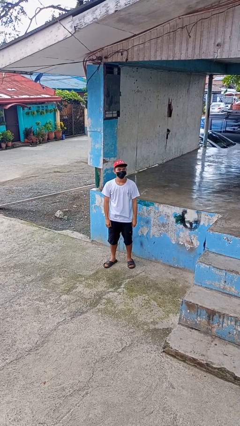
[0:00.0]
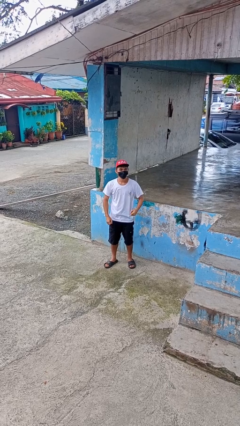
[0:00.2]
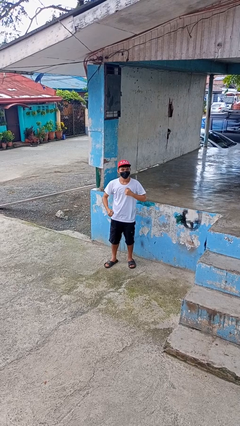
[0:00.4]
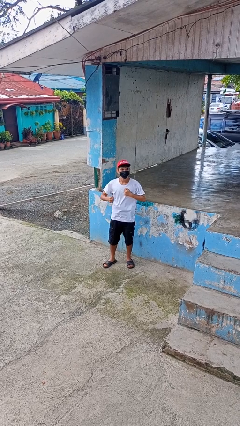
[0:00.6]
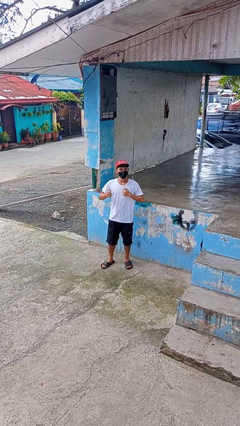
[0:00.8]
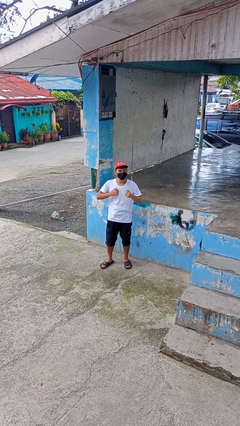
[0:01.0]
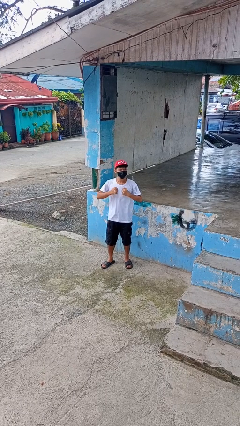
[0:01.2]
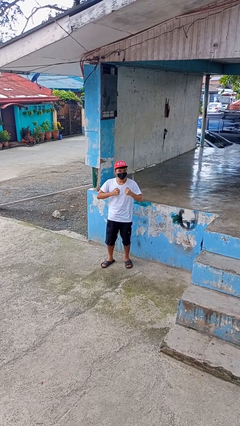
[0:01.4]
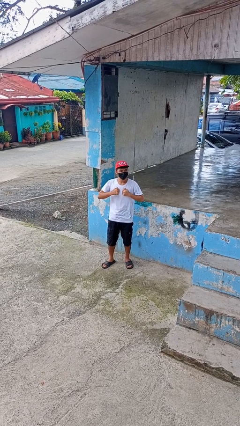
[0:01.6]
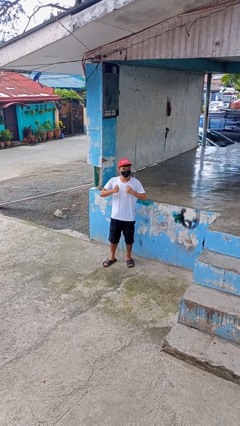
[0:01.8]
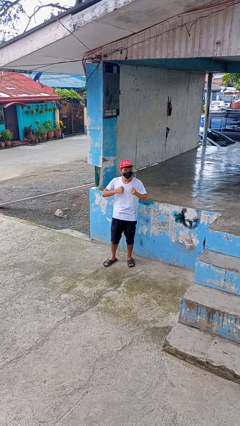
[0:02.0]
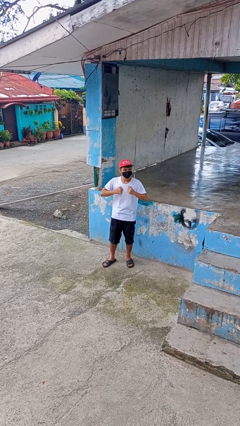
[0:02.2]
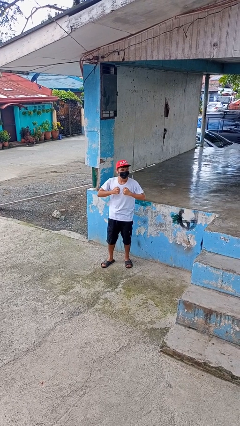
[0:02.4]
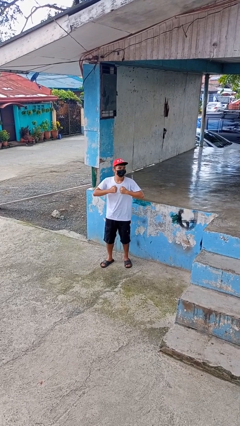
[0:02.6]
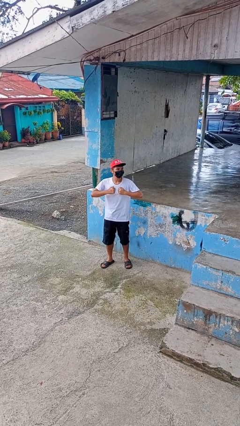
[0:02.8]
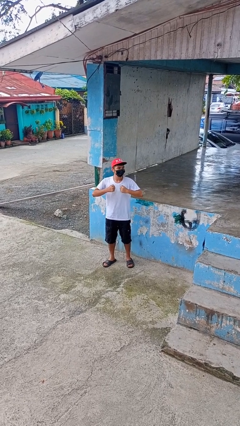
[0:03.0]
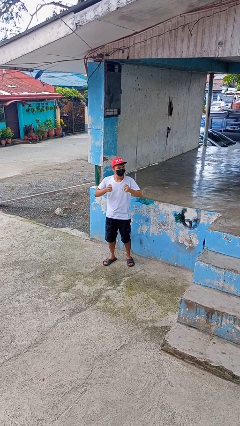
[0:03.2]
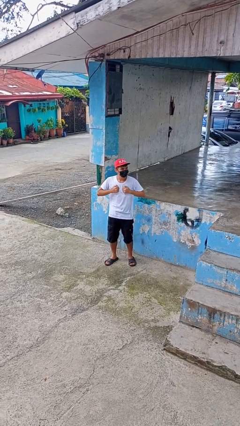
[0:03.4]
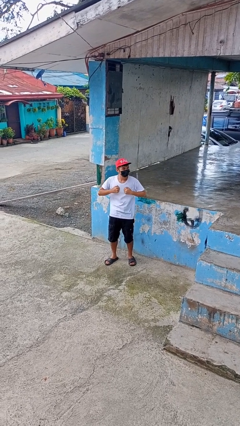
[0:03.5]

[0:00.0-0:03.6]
person drums on chest

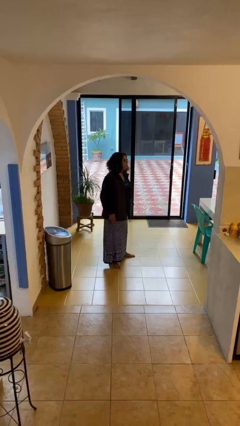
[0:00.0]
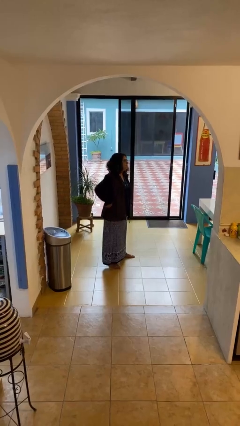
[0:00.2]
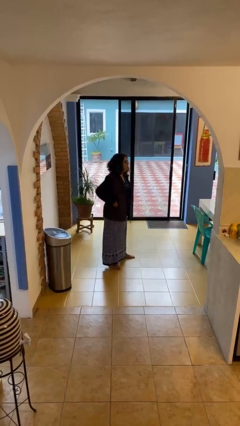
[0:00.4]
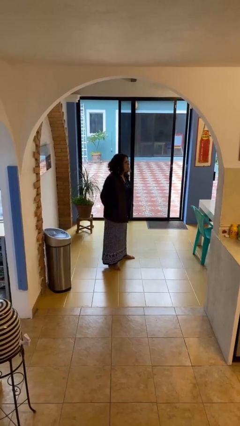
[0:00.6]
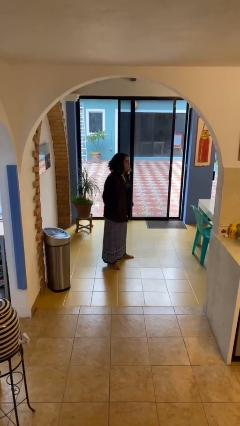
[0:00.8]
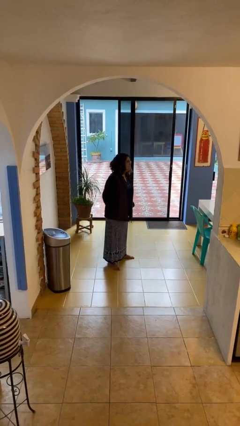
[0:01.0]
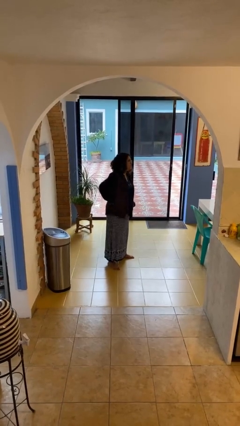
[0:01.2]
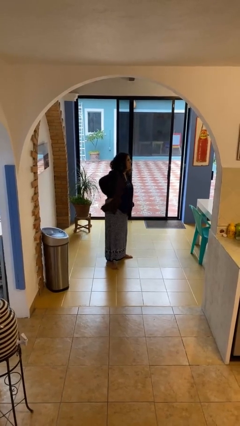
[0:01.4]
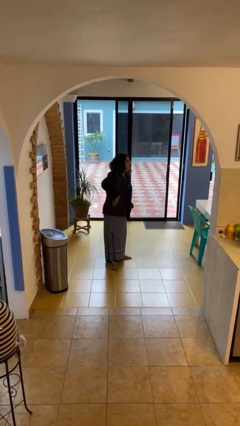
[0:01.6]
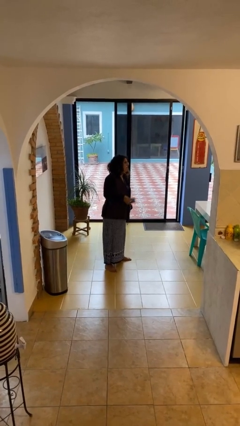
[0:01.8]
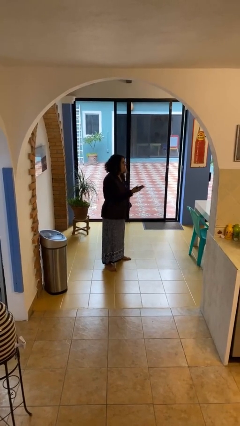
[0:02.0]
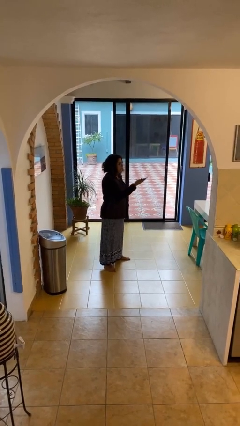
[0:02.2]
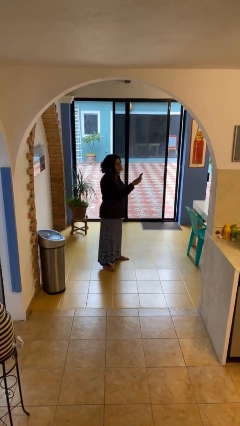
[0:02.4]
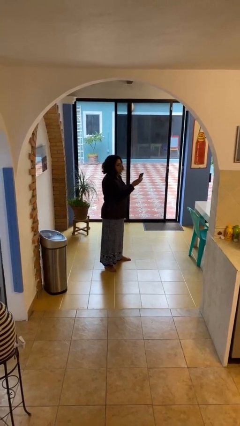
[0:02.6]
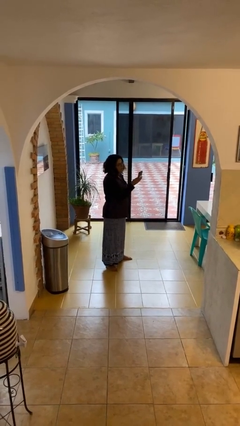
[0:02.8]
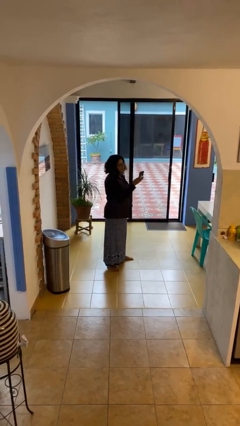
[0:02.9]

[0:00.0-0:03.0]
person takes phone from pocket

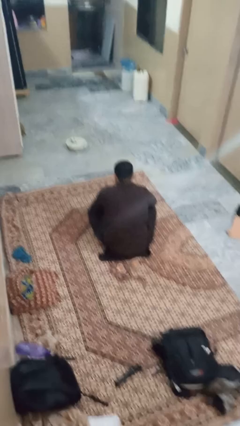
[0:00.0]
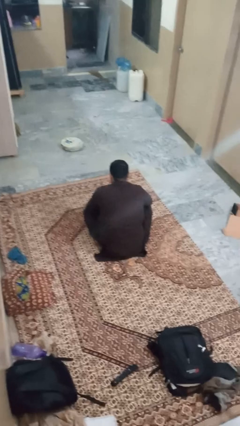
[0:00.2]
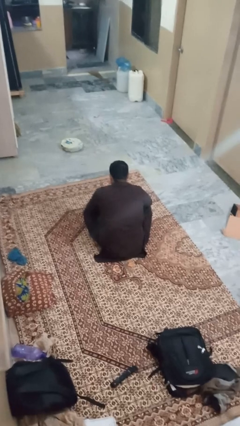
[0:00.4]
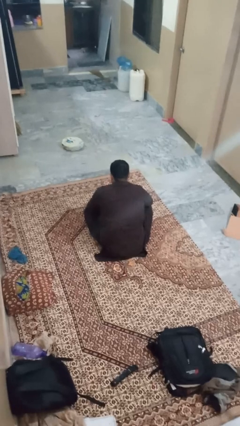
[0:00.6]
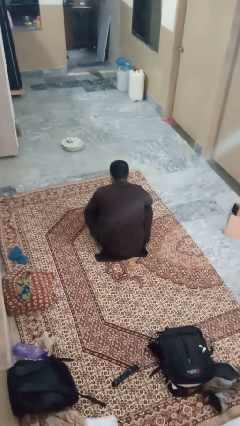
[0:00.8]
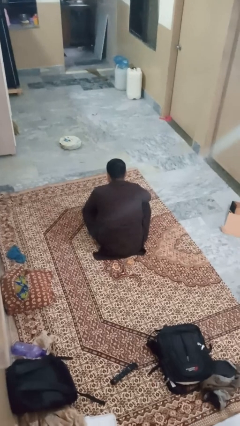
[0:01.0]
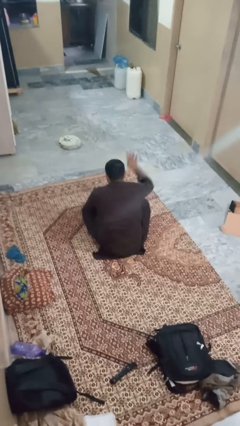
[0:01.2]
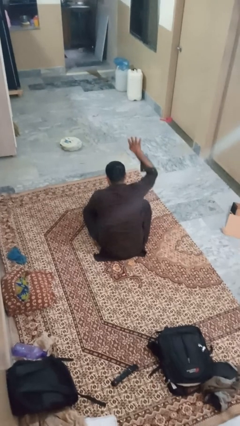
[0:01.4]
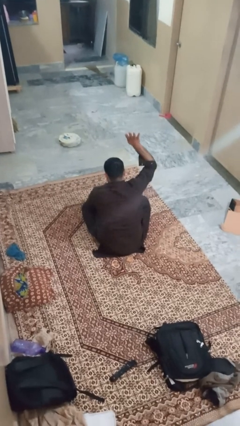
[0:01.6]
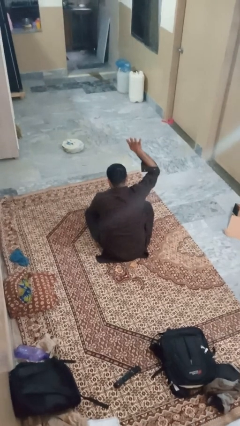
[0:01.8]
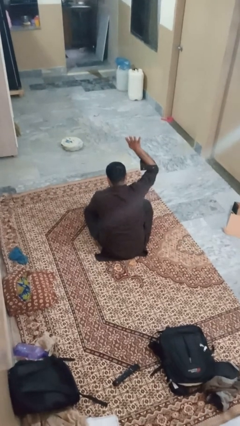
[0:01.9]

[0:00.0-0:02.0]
person gestures number four

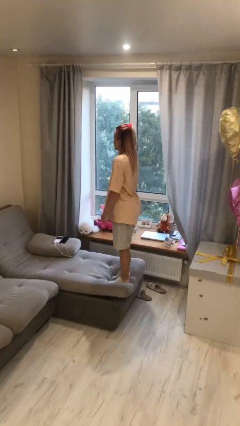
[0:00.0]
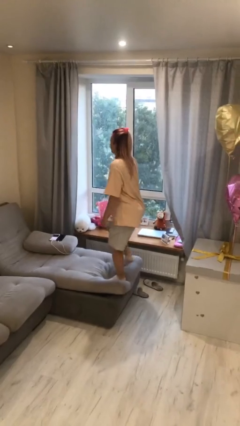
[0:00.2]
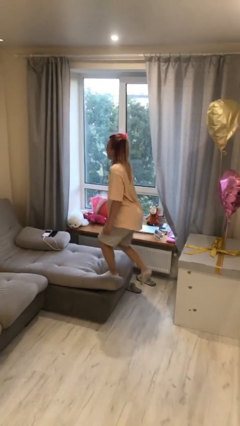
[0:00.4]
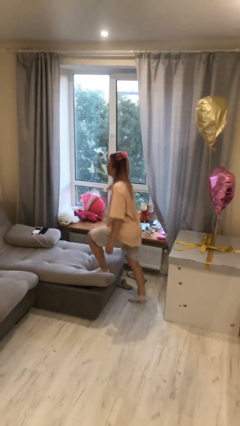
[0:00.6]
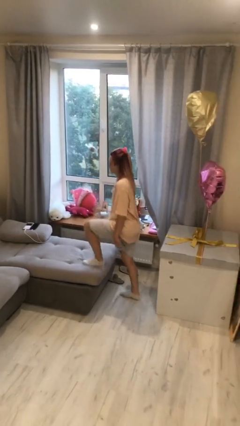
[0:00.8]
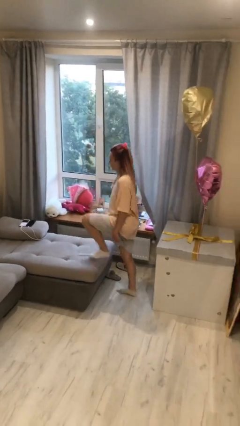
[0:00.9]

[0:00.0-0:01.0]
person climbs off couch

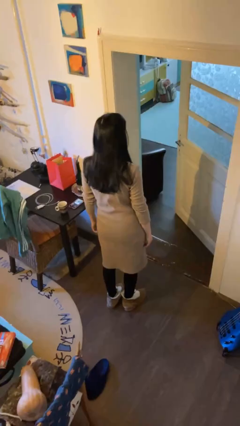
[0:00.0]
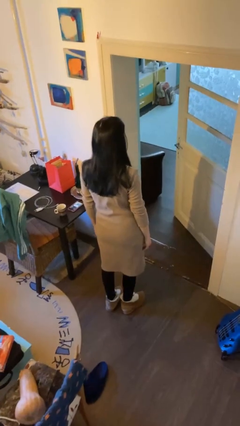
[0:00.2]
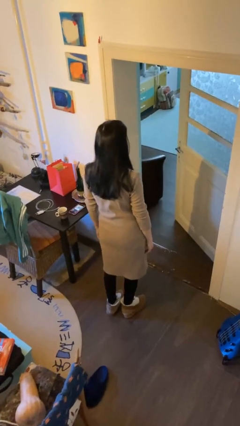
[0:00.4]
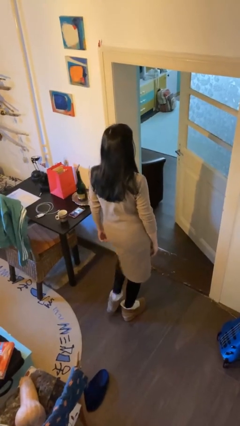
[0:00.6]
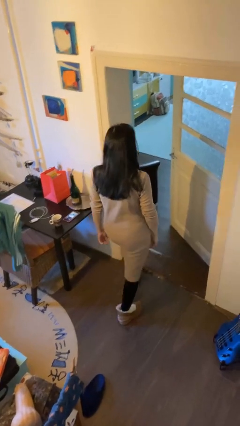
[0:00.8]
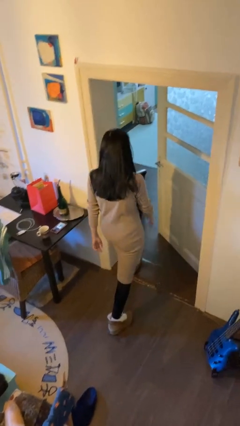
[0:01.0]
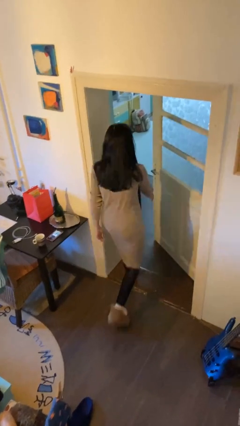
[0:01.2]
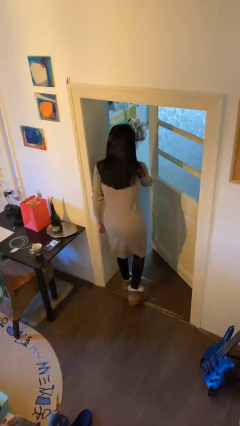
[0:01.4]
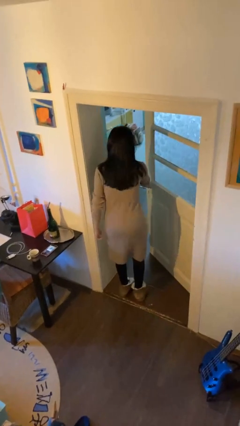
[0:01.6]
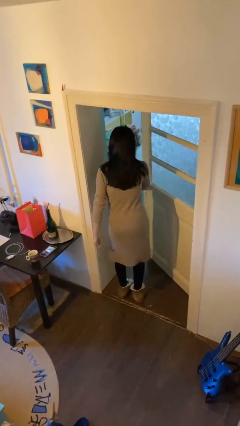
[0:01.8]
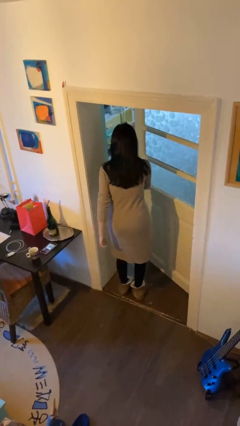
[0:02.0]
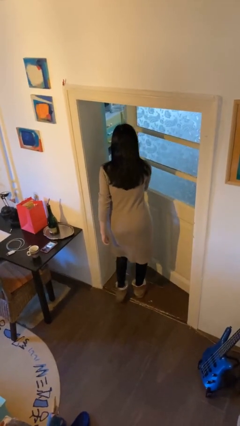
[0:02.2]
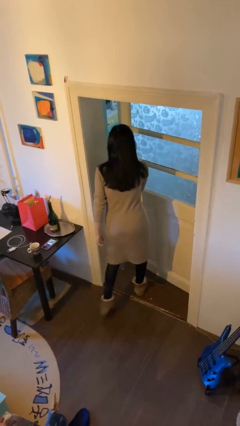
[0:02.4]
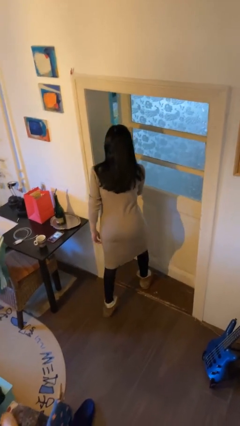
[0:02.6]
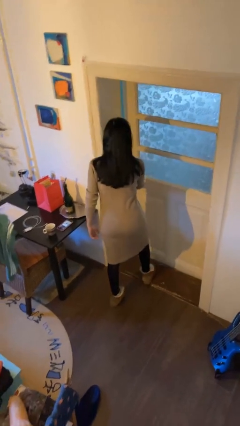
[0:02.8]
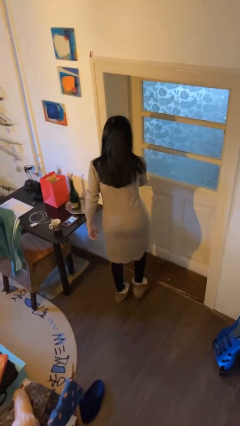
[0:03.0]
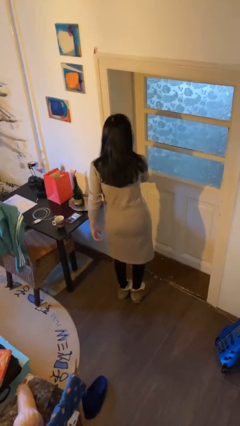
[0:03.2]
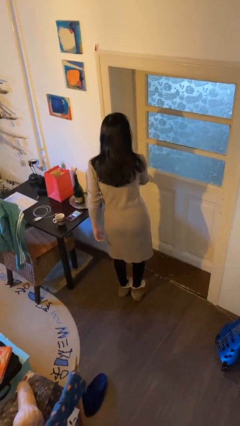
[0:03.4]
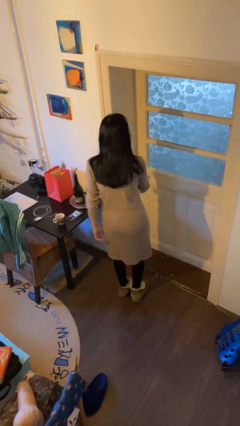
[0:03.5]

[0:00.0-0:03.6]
person closes facility door

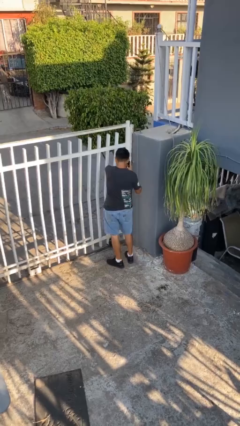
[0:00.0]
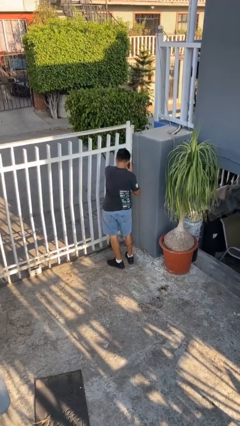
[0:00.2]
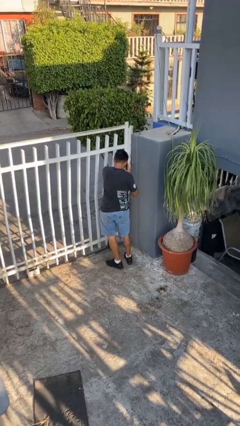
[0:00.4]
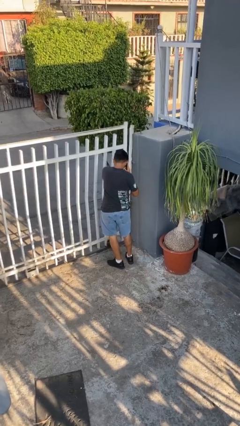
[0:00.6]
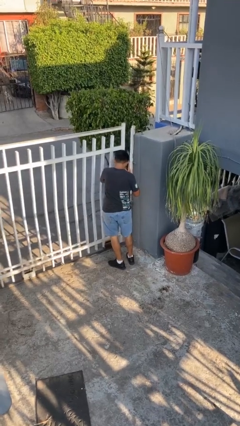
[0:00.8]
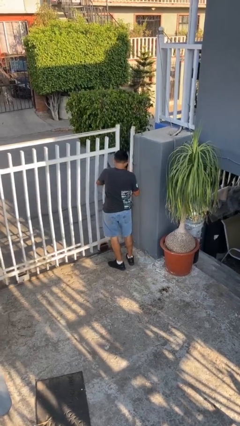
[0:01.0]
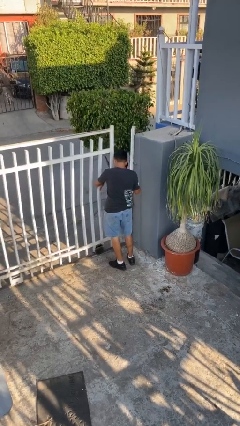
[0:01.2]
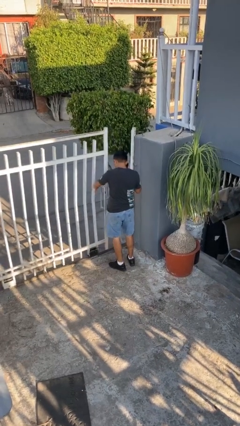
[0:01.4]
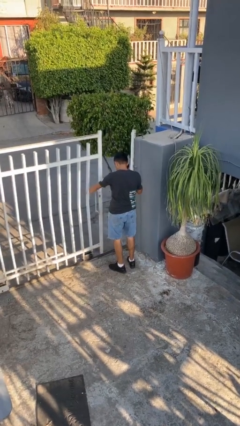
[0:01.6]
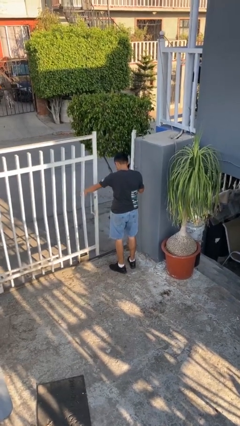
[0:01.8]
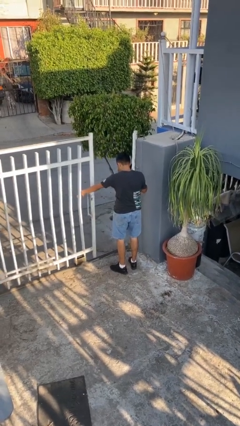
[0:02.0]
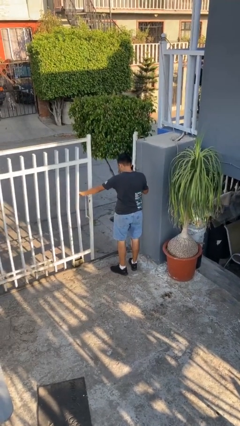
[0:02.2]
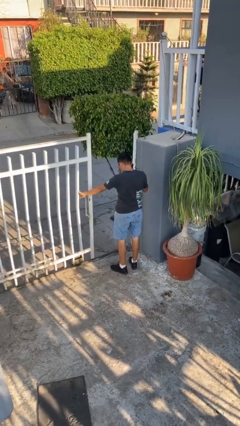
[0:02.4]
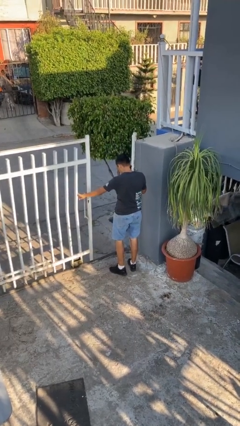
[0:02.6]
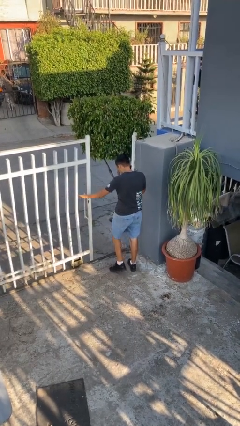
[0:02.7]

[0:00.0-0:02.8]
person opens facility door

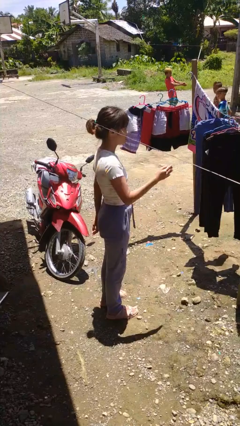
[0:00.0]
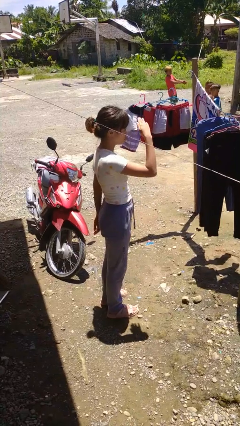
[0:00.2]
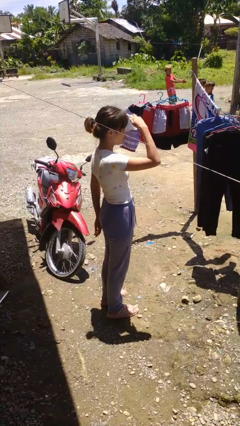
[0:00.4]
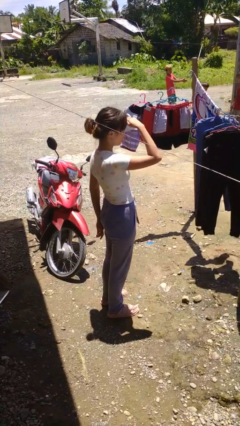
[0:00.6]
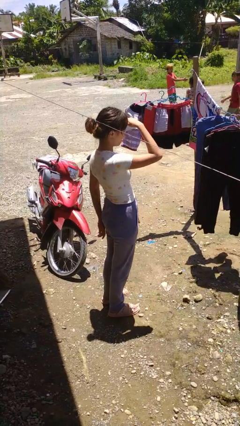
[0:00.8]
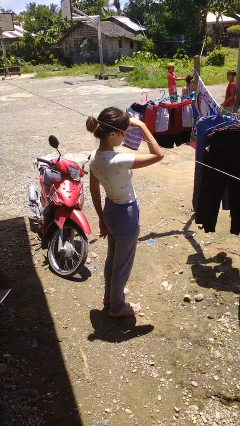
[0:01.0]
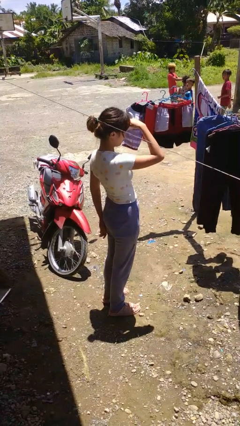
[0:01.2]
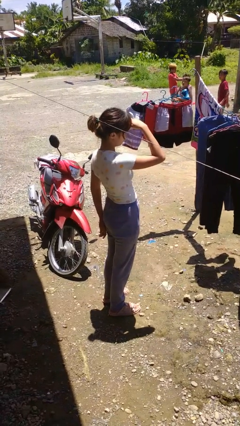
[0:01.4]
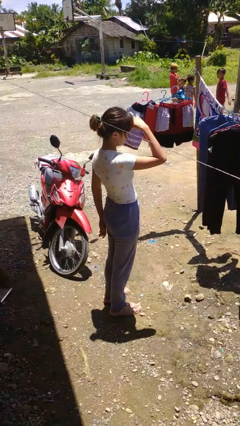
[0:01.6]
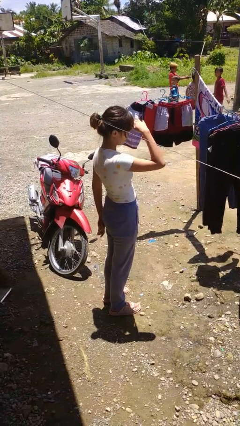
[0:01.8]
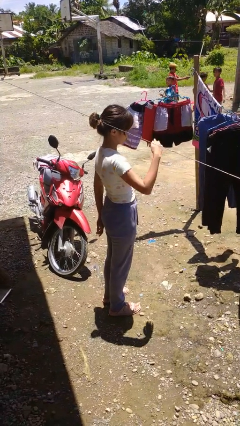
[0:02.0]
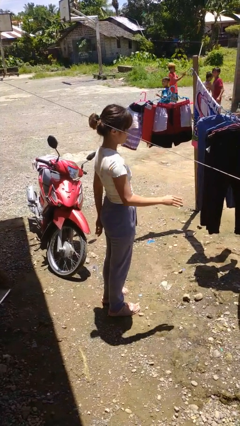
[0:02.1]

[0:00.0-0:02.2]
person shades eyes
